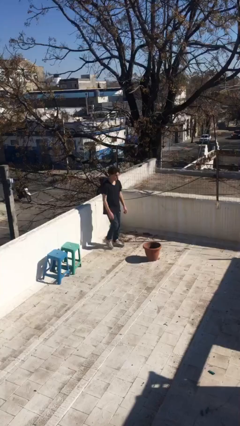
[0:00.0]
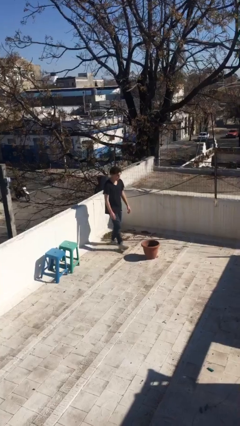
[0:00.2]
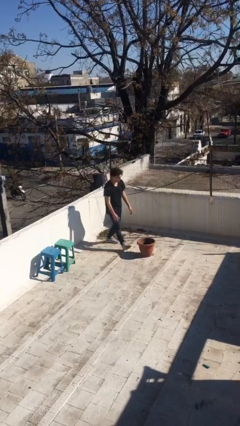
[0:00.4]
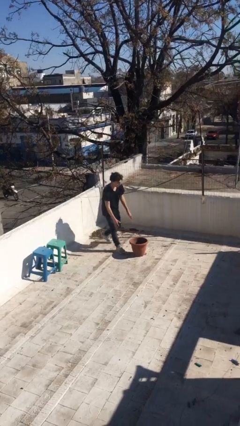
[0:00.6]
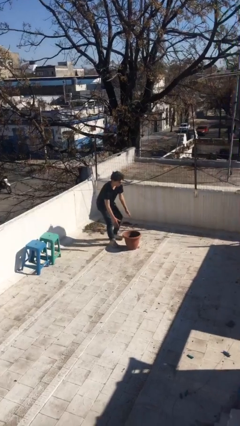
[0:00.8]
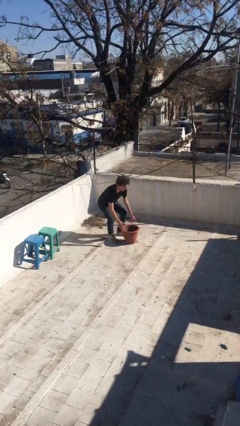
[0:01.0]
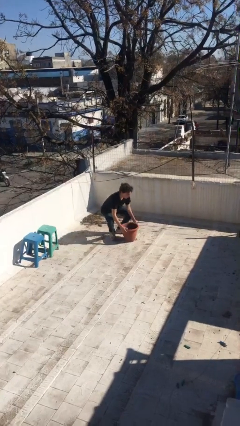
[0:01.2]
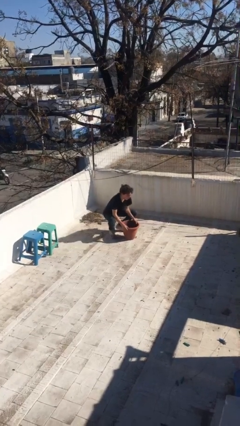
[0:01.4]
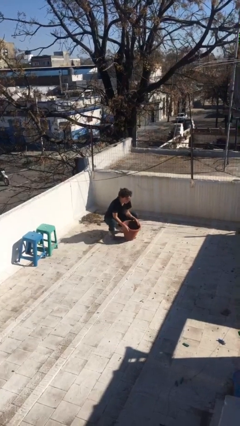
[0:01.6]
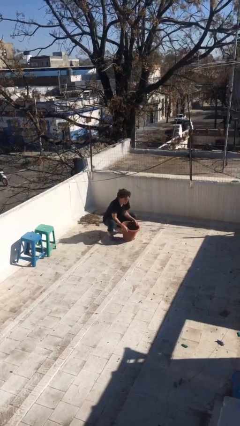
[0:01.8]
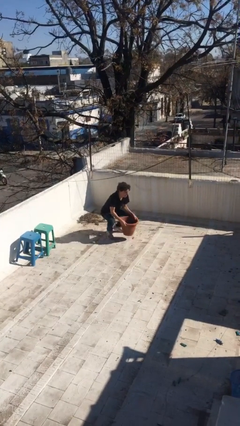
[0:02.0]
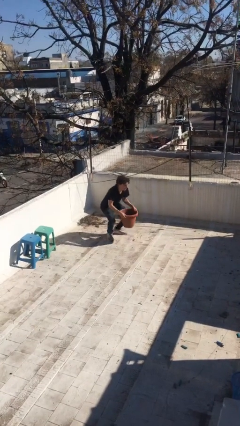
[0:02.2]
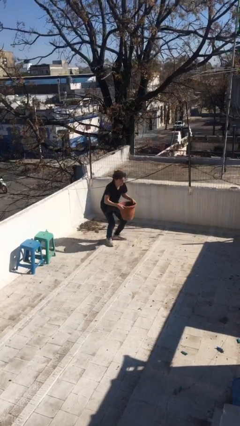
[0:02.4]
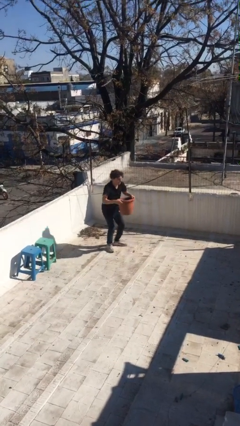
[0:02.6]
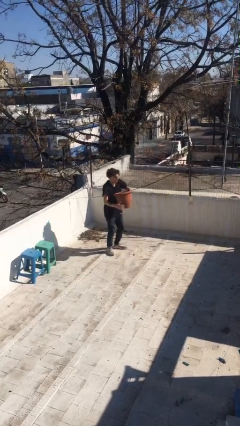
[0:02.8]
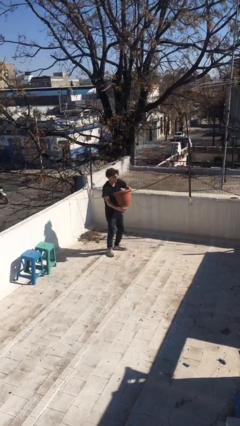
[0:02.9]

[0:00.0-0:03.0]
person picks up object from floor

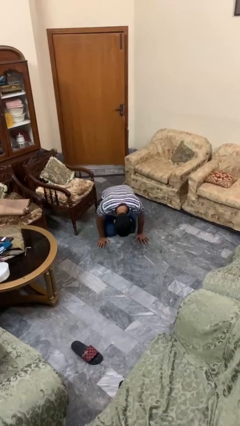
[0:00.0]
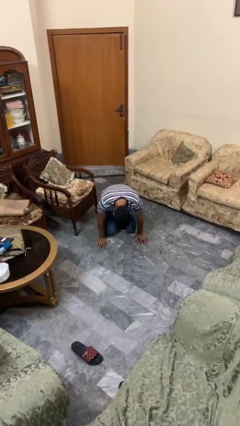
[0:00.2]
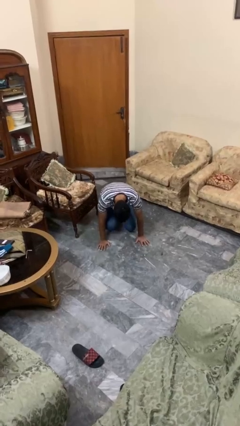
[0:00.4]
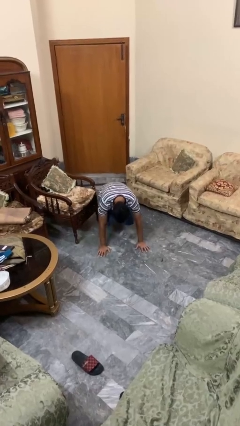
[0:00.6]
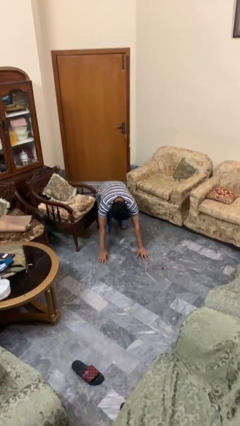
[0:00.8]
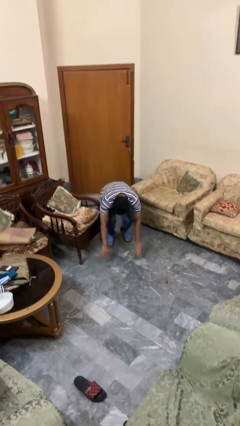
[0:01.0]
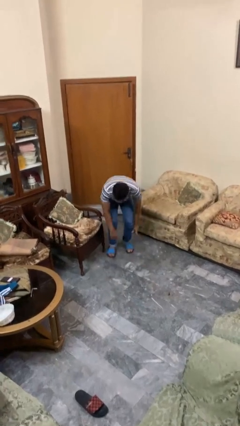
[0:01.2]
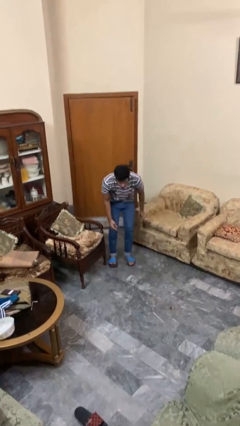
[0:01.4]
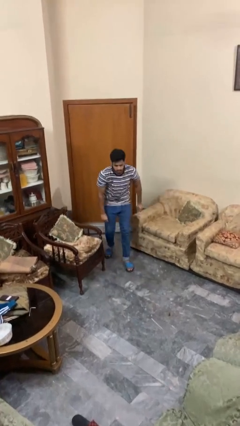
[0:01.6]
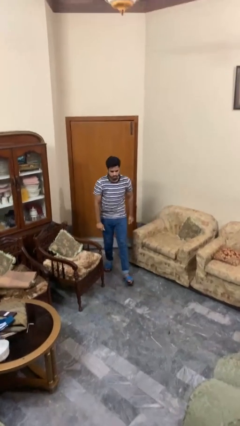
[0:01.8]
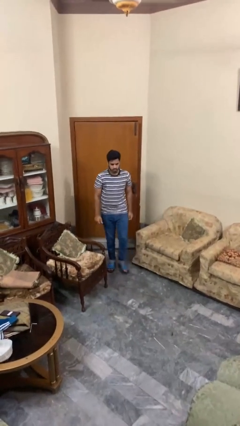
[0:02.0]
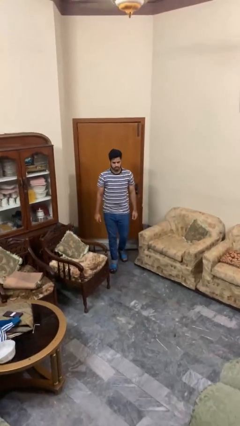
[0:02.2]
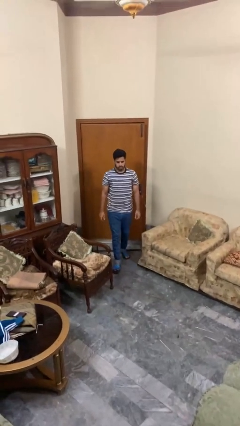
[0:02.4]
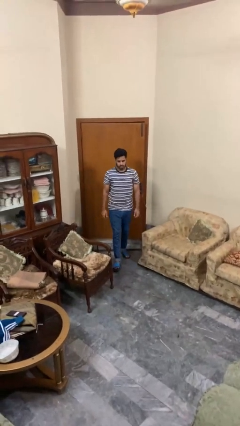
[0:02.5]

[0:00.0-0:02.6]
person stands up from floor

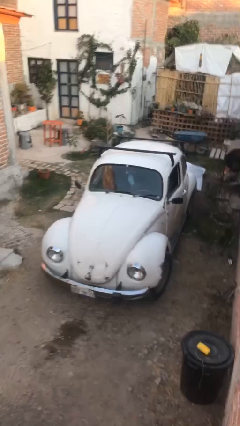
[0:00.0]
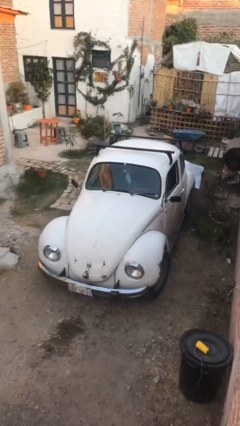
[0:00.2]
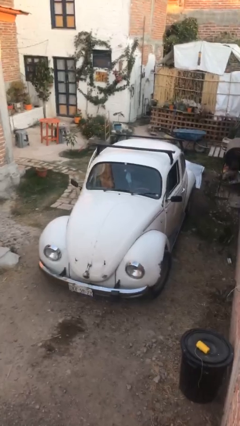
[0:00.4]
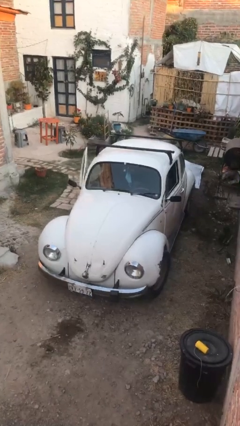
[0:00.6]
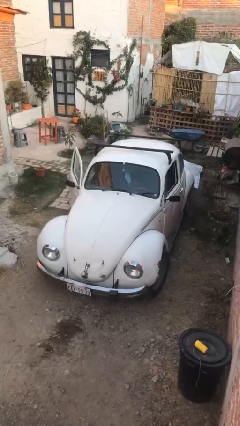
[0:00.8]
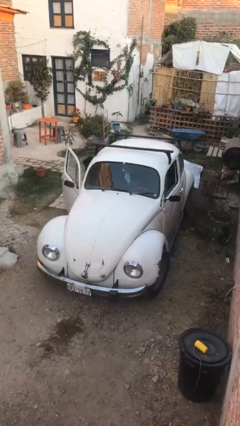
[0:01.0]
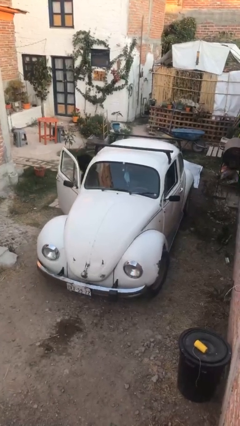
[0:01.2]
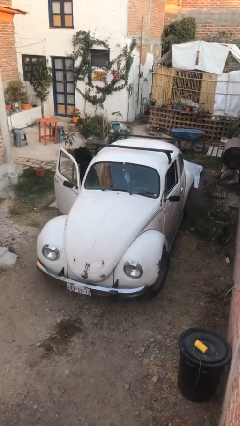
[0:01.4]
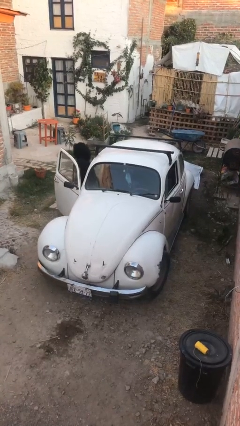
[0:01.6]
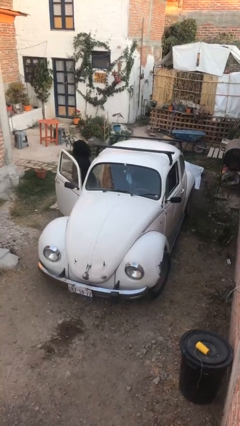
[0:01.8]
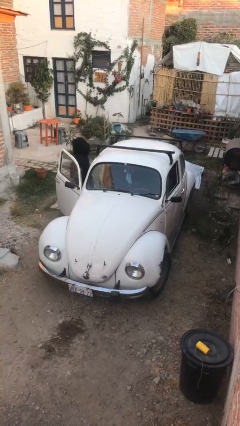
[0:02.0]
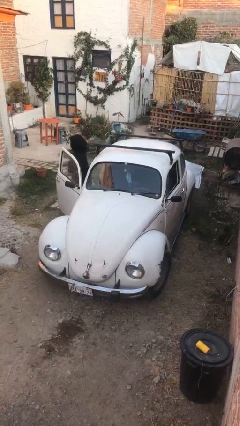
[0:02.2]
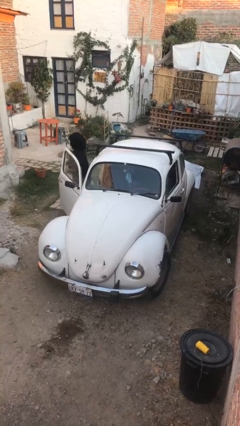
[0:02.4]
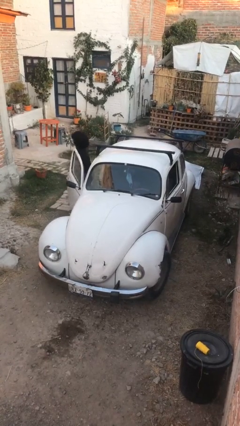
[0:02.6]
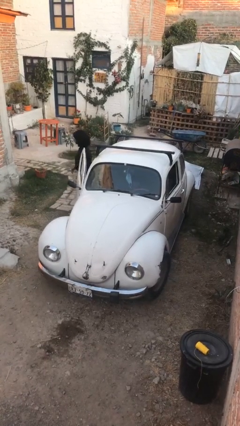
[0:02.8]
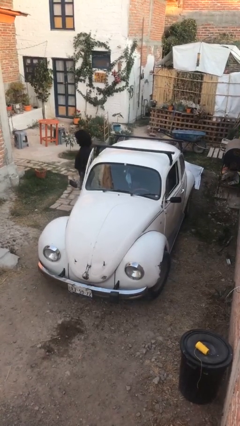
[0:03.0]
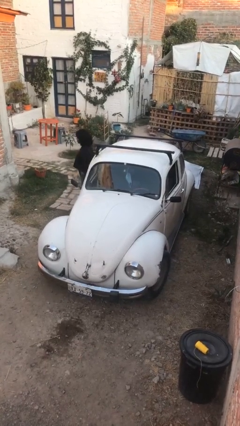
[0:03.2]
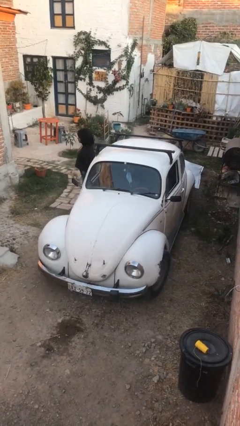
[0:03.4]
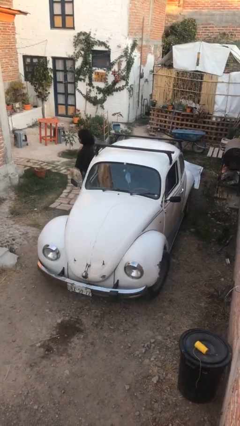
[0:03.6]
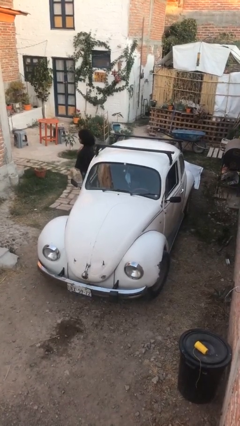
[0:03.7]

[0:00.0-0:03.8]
car drops off person

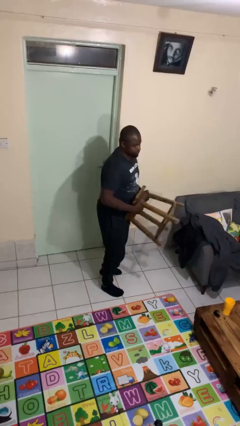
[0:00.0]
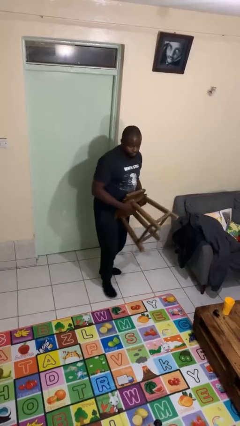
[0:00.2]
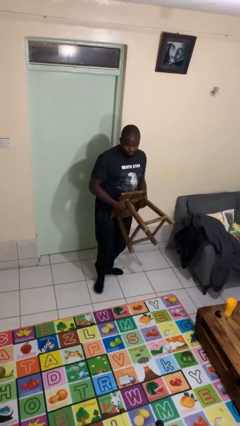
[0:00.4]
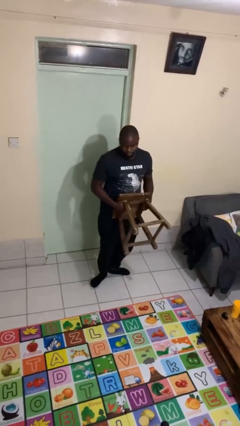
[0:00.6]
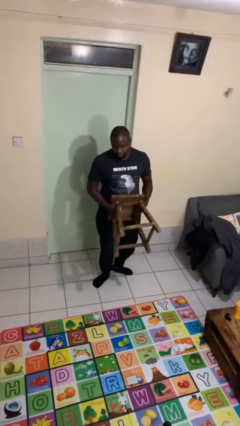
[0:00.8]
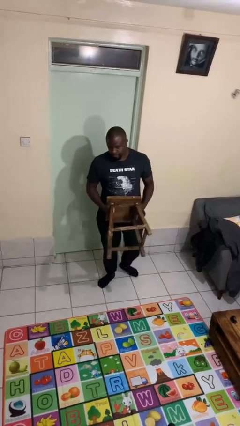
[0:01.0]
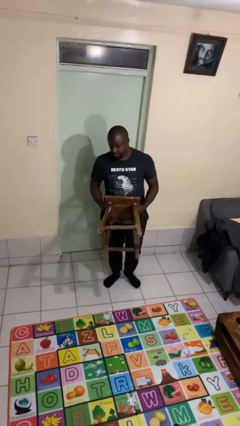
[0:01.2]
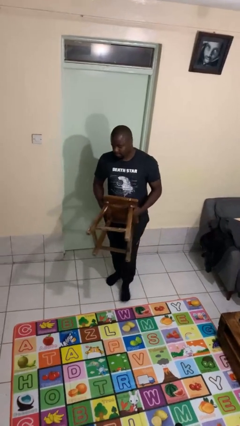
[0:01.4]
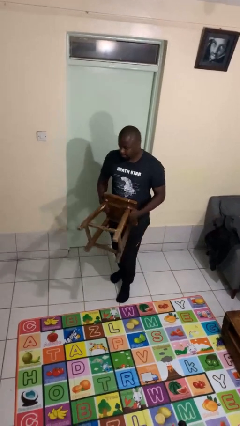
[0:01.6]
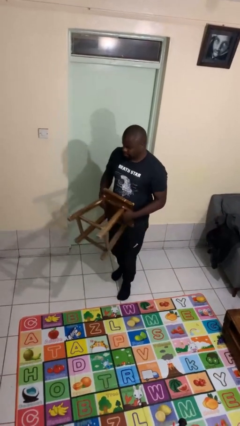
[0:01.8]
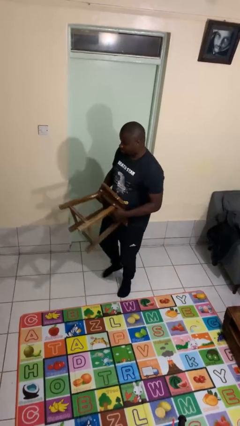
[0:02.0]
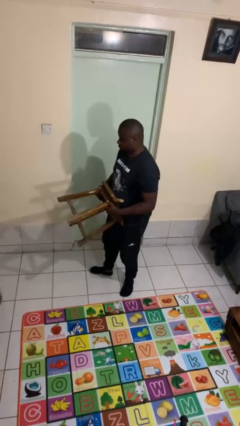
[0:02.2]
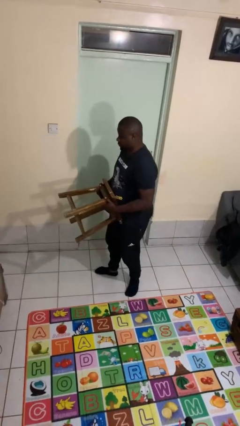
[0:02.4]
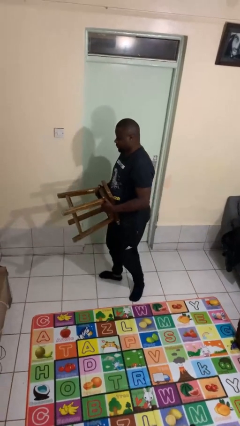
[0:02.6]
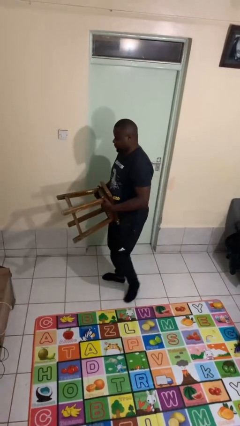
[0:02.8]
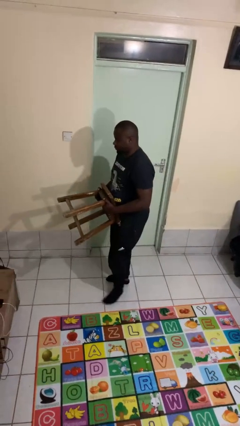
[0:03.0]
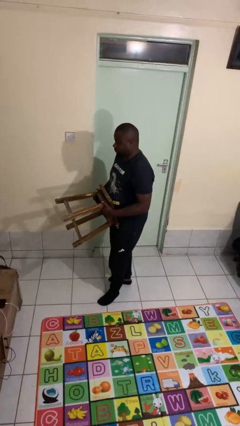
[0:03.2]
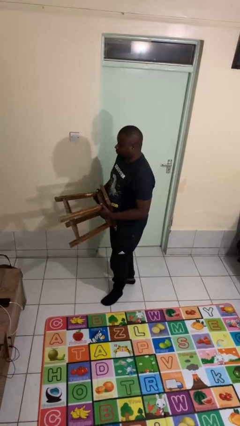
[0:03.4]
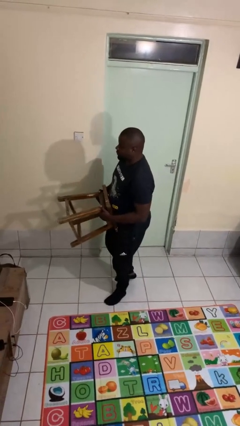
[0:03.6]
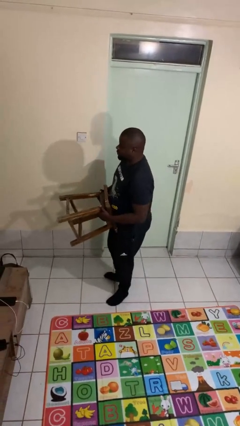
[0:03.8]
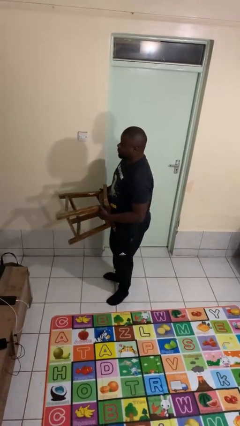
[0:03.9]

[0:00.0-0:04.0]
person carries furniture

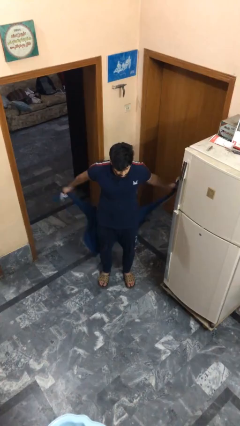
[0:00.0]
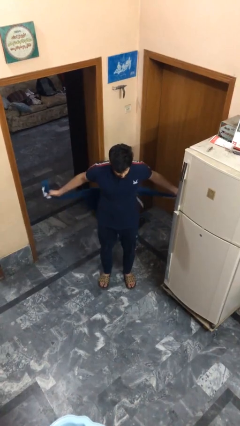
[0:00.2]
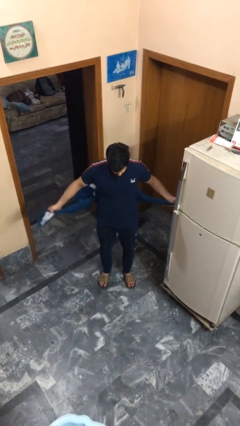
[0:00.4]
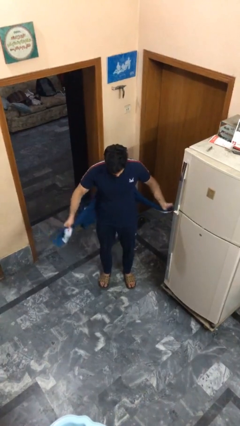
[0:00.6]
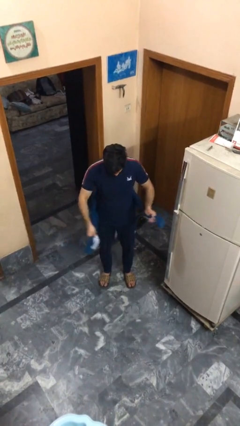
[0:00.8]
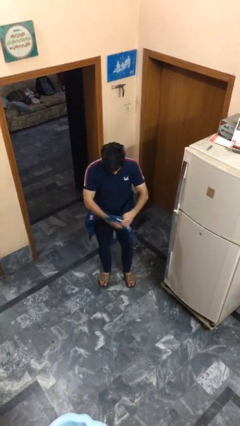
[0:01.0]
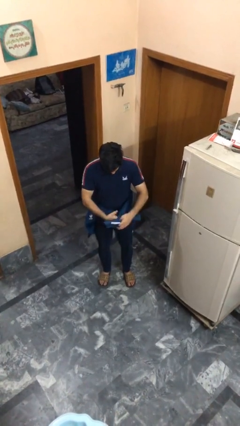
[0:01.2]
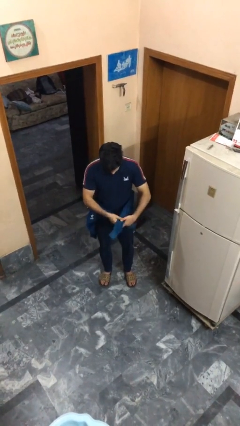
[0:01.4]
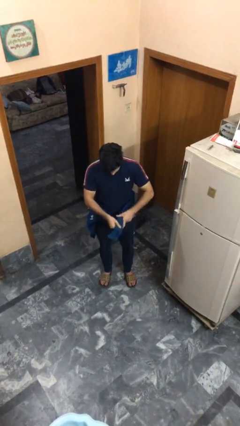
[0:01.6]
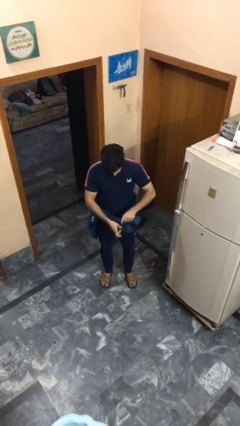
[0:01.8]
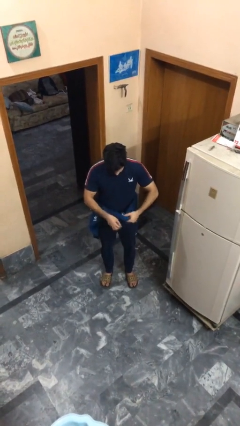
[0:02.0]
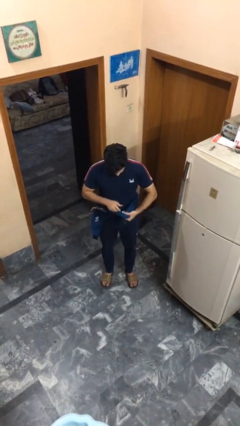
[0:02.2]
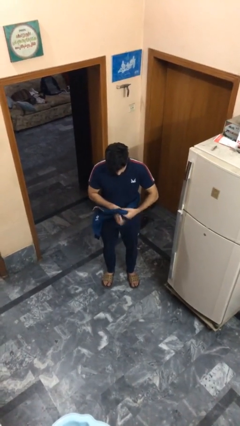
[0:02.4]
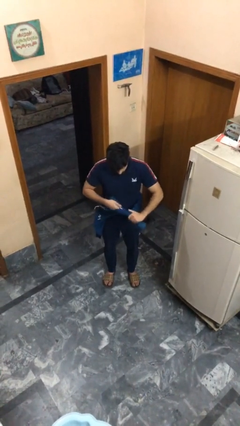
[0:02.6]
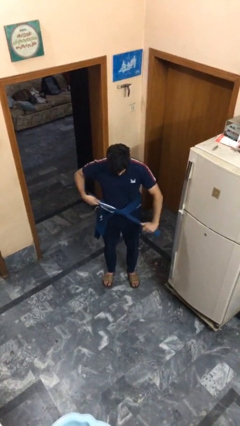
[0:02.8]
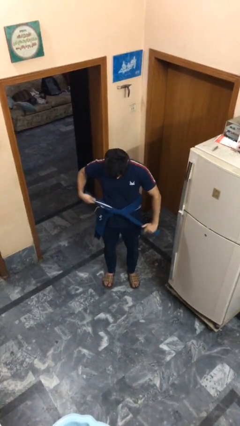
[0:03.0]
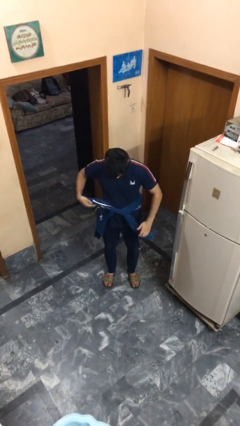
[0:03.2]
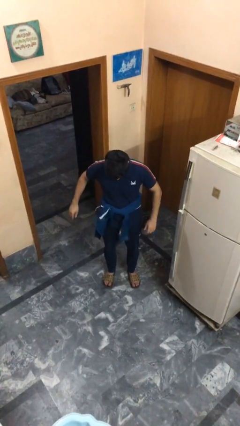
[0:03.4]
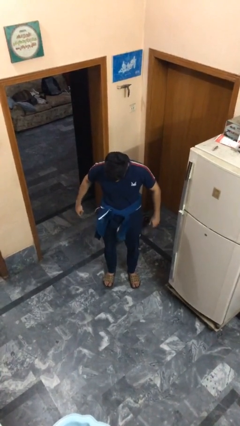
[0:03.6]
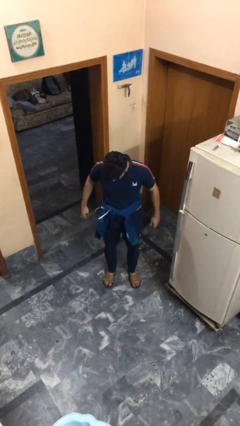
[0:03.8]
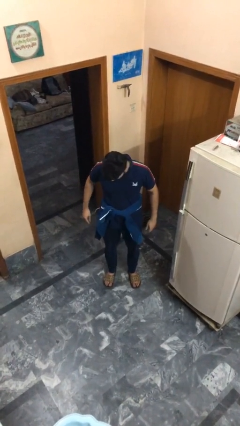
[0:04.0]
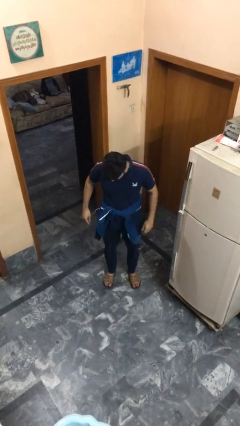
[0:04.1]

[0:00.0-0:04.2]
person ties jacket around waist
